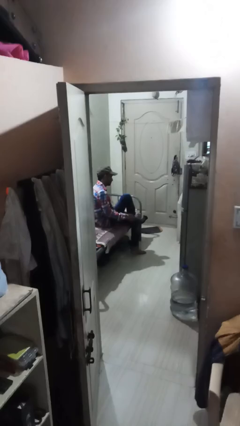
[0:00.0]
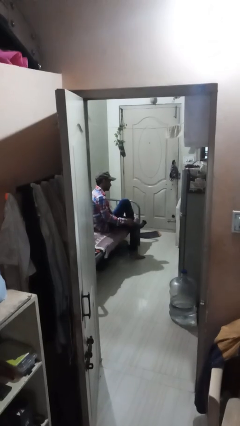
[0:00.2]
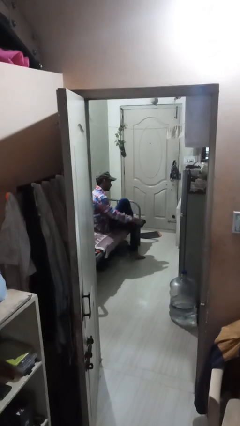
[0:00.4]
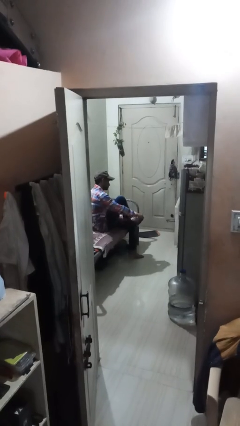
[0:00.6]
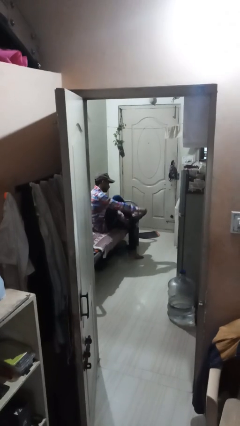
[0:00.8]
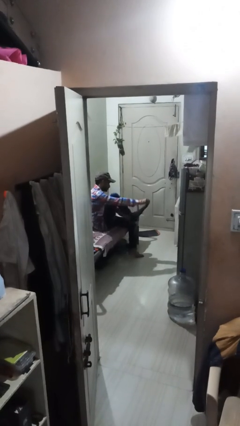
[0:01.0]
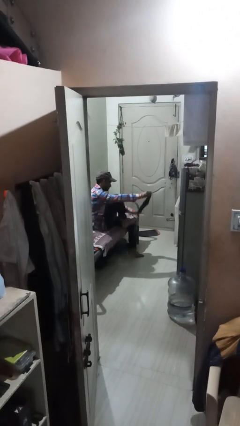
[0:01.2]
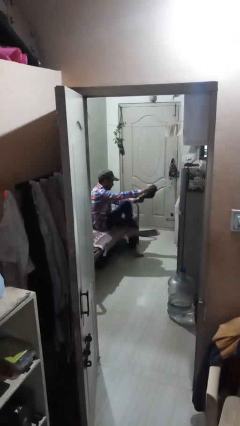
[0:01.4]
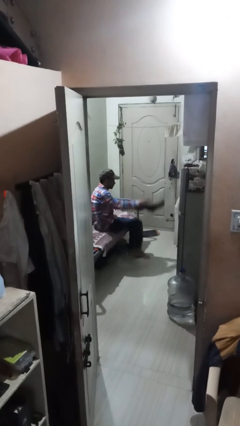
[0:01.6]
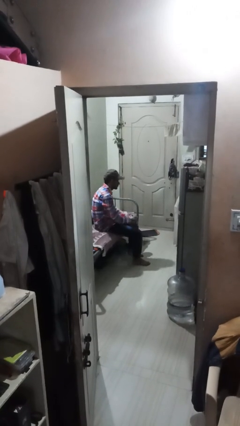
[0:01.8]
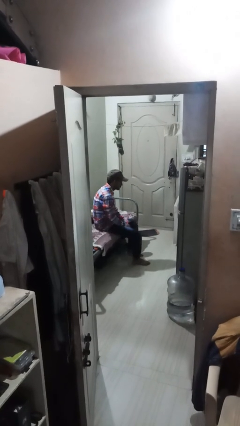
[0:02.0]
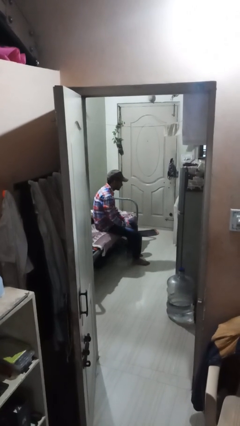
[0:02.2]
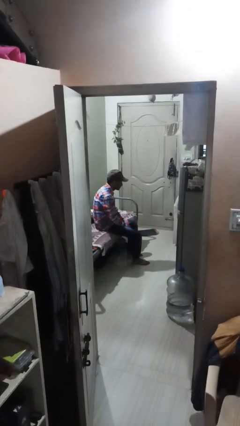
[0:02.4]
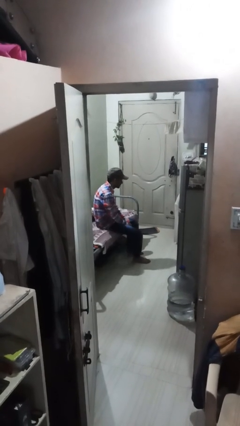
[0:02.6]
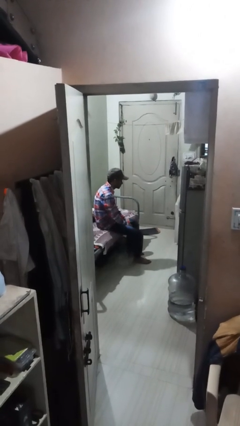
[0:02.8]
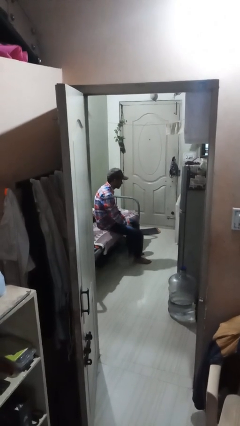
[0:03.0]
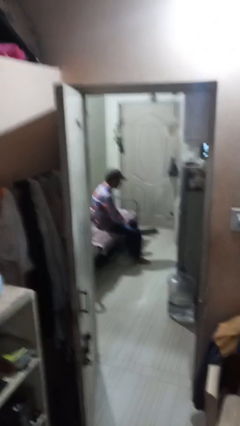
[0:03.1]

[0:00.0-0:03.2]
person takes off socks

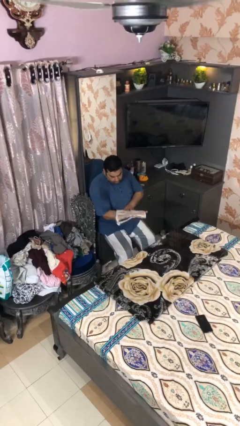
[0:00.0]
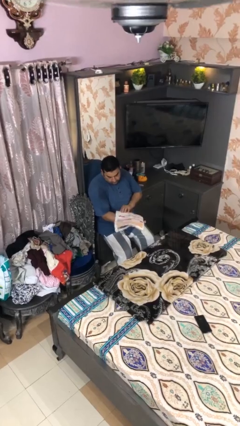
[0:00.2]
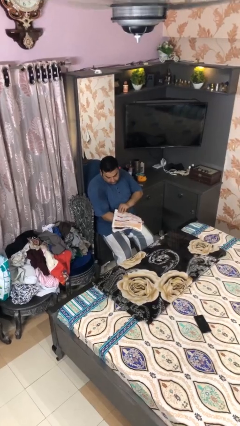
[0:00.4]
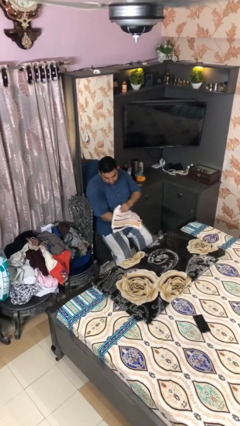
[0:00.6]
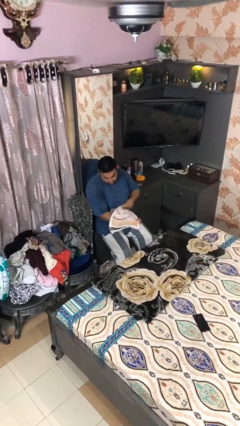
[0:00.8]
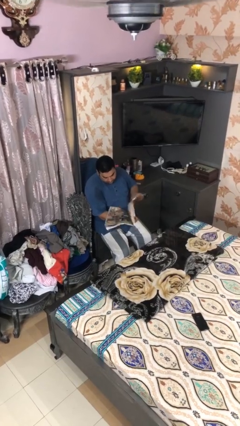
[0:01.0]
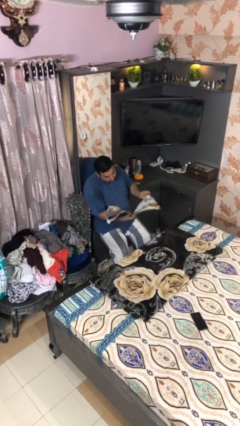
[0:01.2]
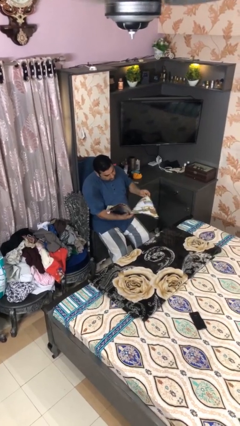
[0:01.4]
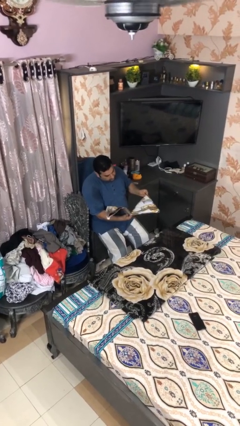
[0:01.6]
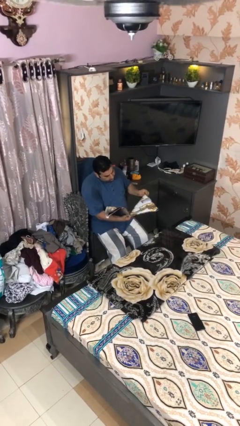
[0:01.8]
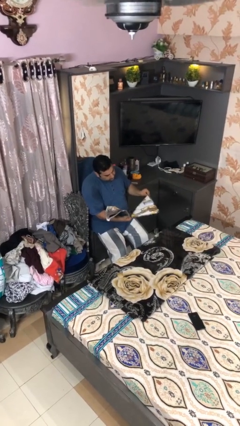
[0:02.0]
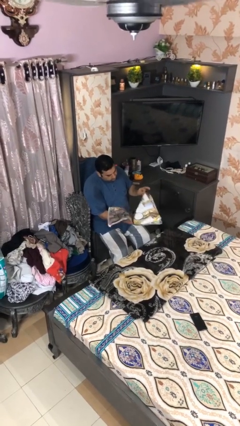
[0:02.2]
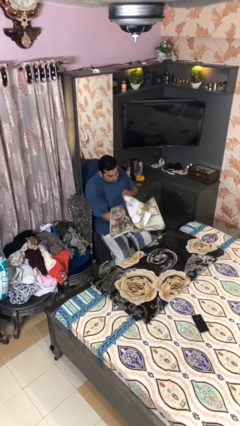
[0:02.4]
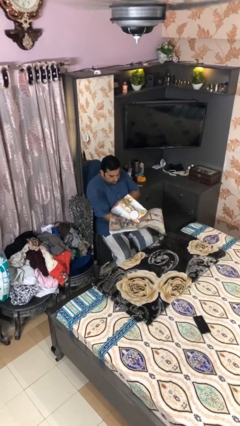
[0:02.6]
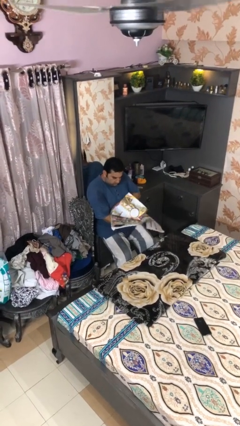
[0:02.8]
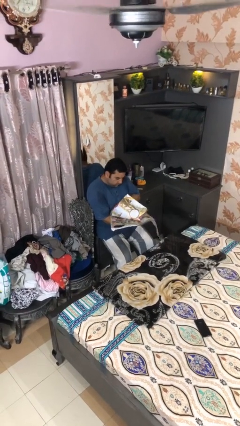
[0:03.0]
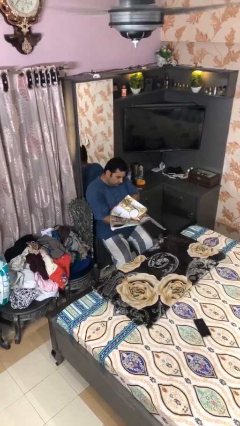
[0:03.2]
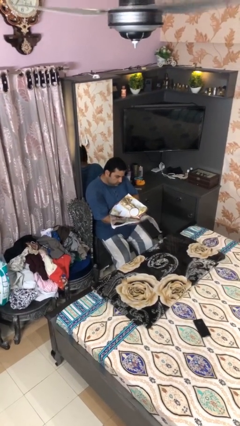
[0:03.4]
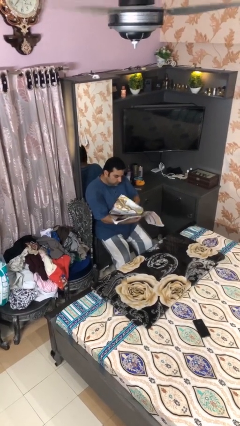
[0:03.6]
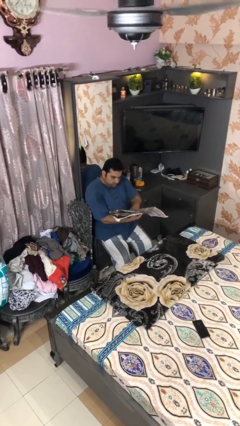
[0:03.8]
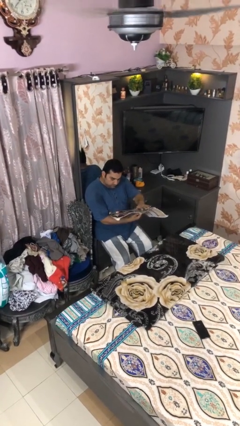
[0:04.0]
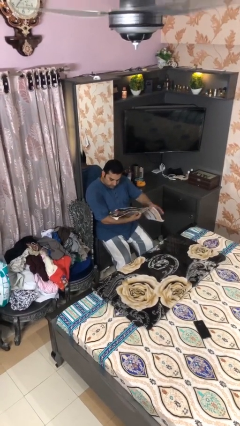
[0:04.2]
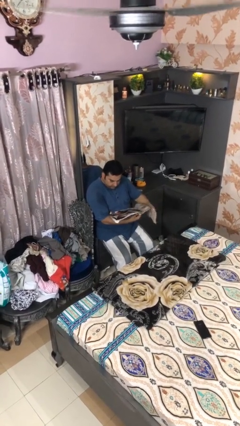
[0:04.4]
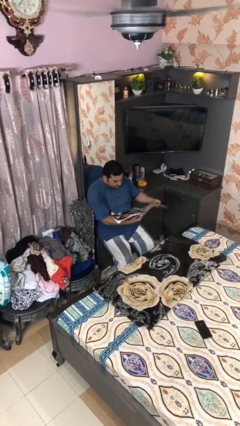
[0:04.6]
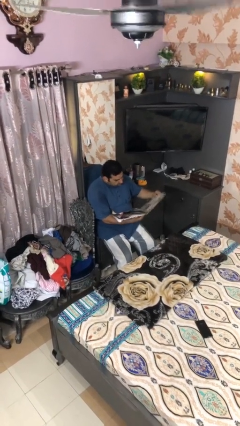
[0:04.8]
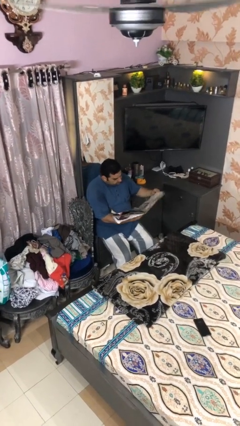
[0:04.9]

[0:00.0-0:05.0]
person reads magazine

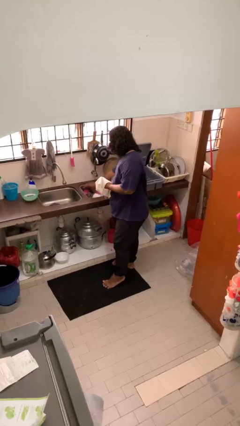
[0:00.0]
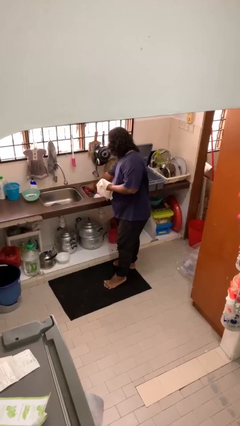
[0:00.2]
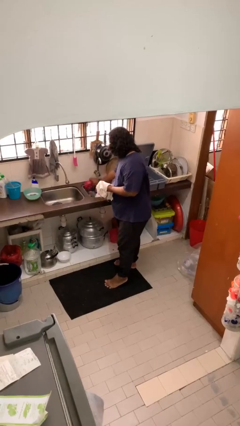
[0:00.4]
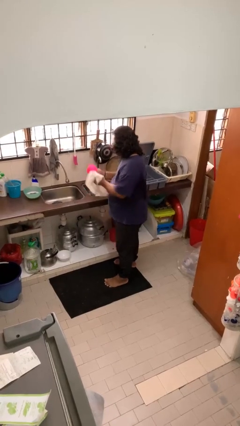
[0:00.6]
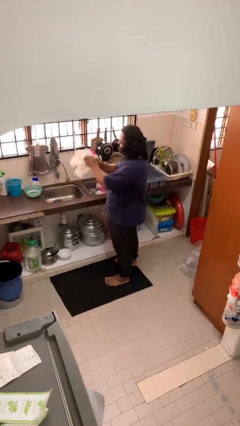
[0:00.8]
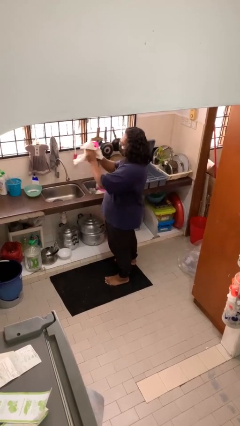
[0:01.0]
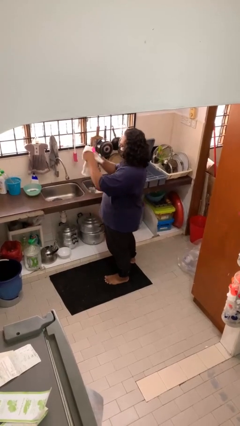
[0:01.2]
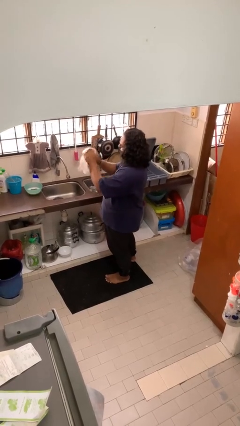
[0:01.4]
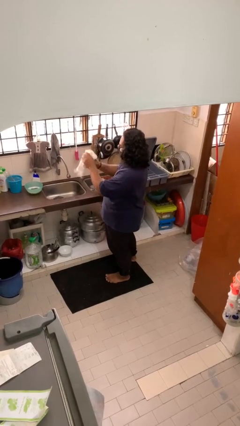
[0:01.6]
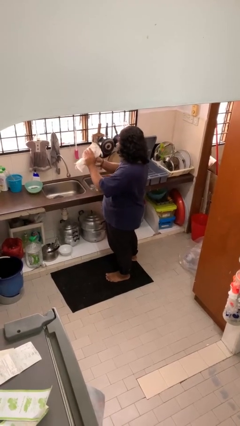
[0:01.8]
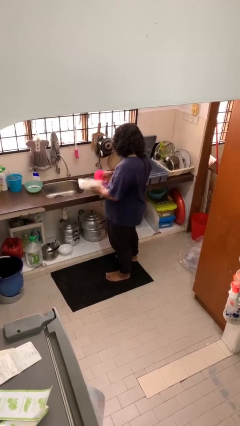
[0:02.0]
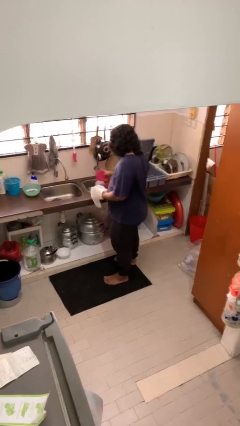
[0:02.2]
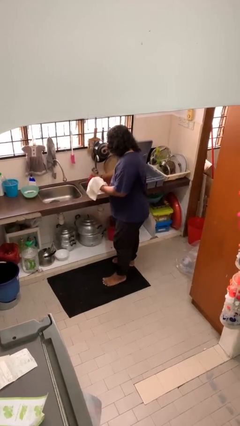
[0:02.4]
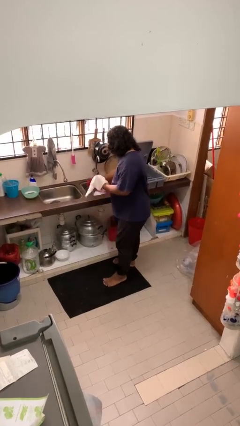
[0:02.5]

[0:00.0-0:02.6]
person dries dish

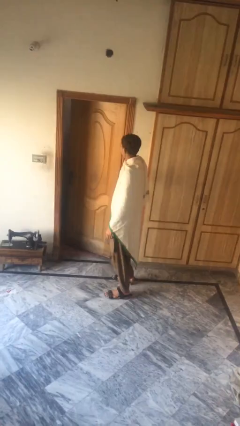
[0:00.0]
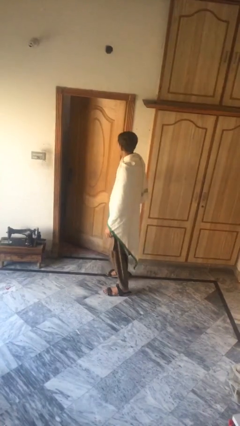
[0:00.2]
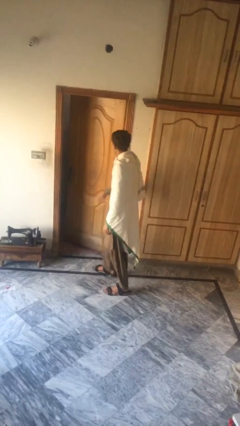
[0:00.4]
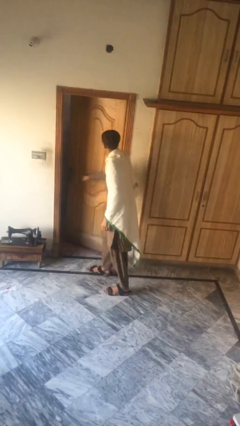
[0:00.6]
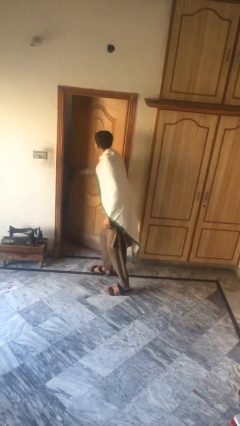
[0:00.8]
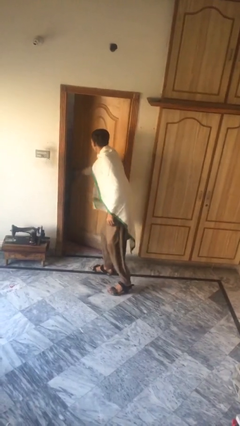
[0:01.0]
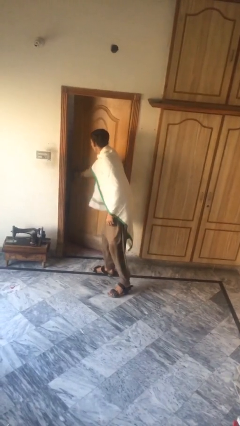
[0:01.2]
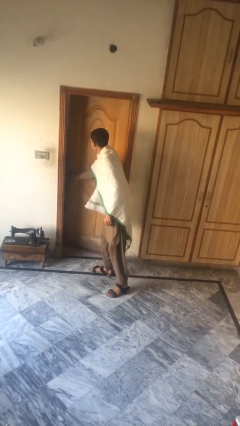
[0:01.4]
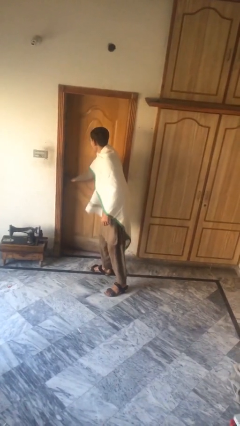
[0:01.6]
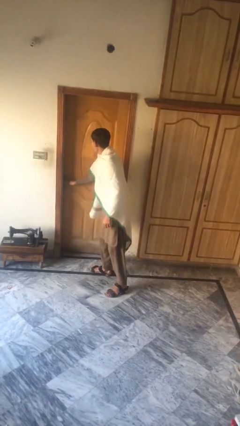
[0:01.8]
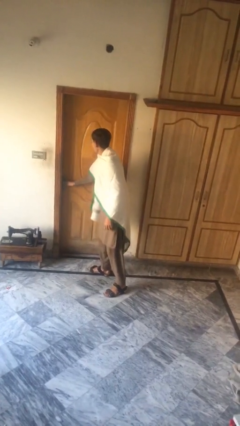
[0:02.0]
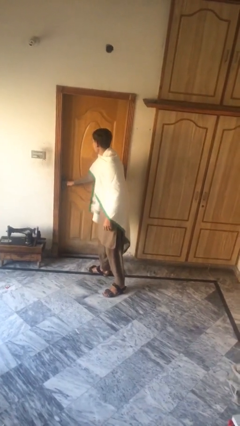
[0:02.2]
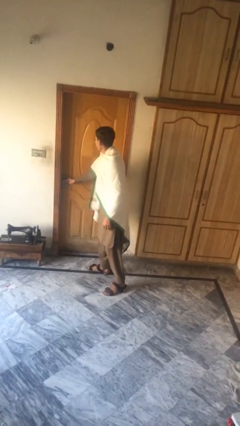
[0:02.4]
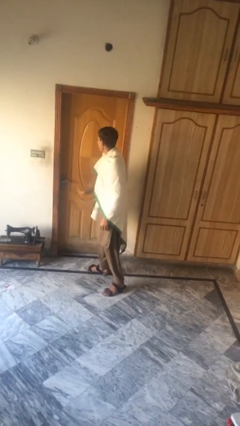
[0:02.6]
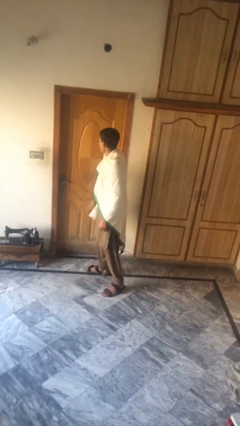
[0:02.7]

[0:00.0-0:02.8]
person closes facility door

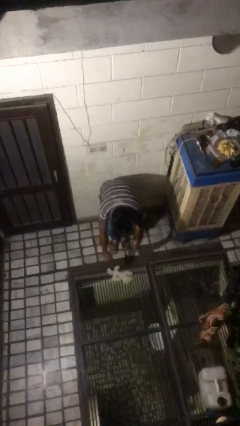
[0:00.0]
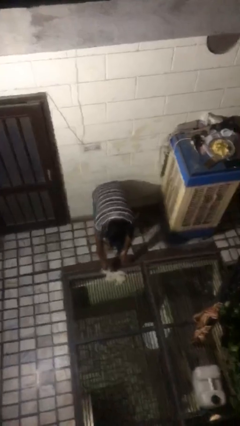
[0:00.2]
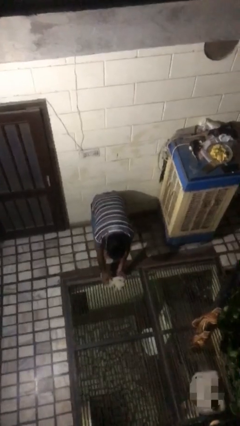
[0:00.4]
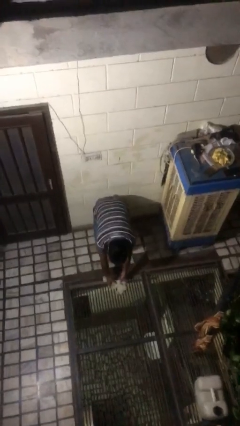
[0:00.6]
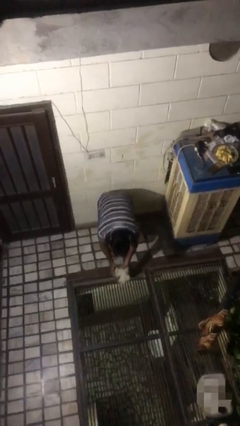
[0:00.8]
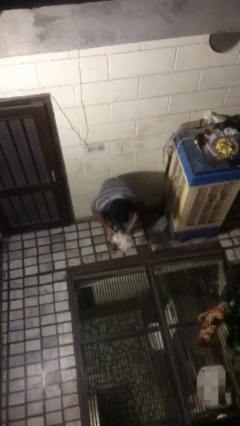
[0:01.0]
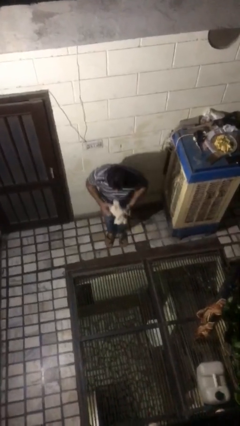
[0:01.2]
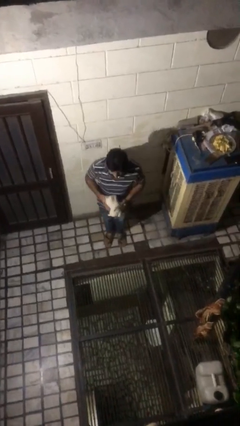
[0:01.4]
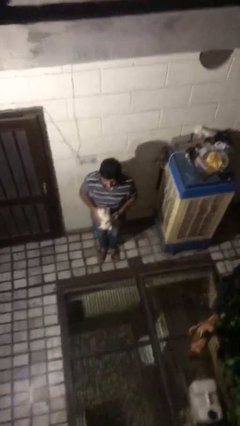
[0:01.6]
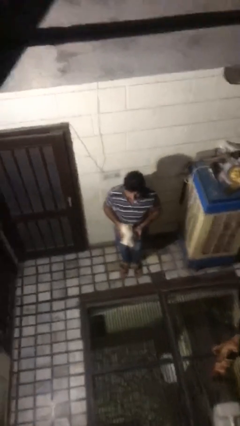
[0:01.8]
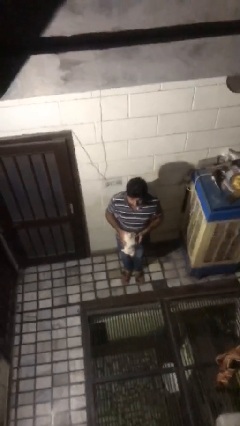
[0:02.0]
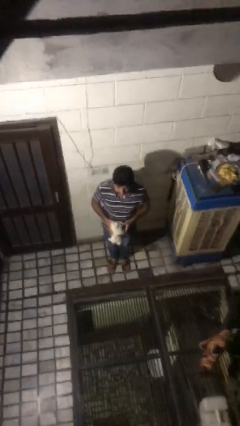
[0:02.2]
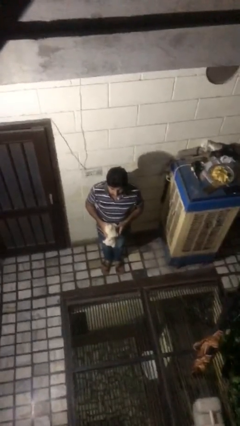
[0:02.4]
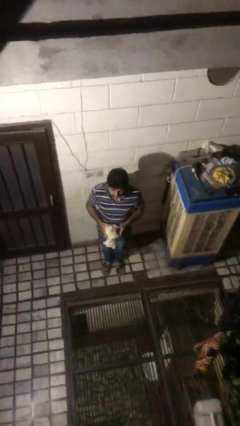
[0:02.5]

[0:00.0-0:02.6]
person picks up object from floor

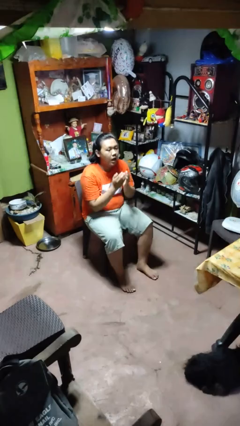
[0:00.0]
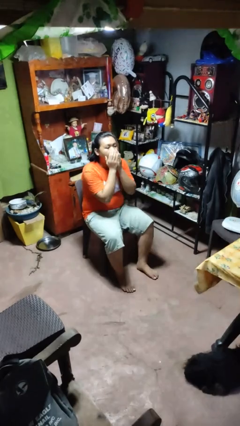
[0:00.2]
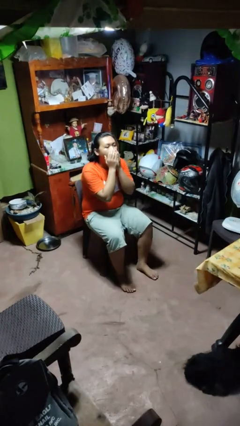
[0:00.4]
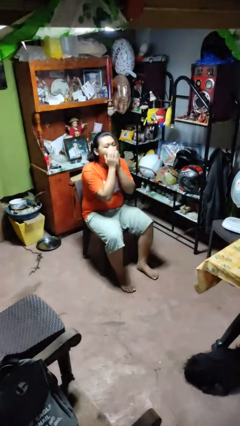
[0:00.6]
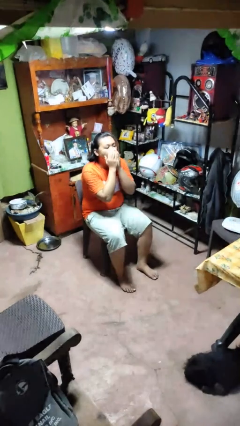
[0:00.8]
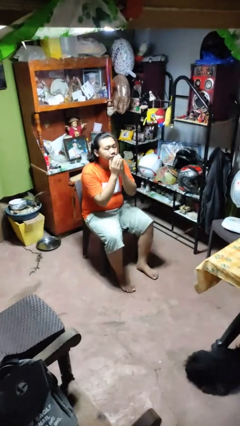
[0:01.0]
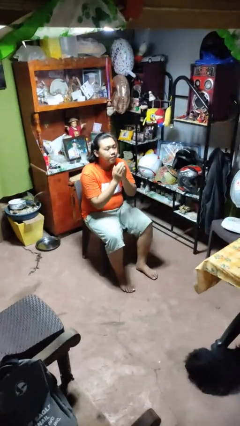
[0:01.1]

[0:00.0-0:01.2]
person yawns
